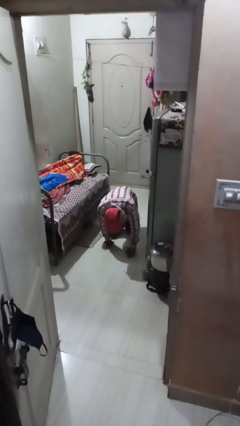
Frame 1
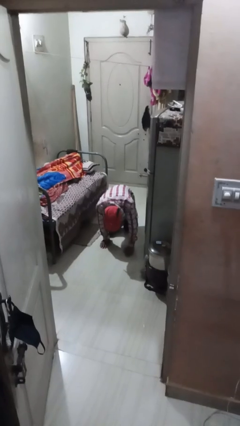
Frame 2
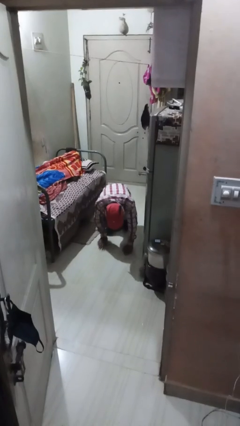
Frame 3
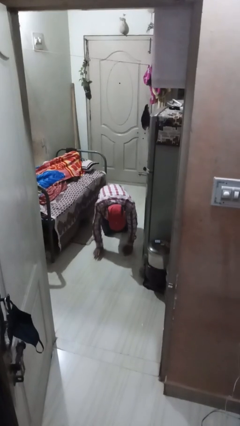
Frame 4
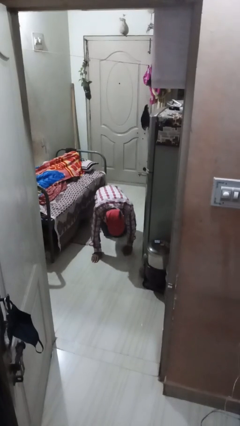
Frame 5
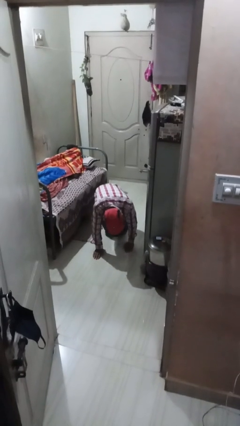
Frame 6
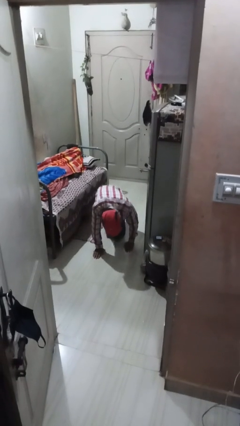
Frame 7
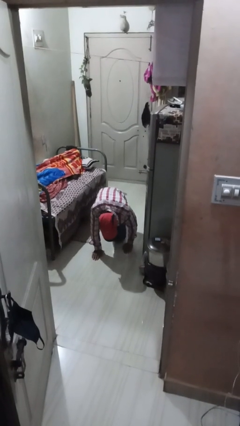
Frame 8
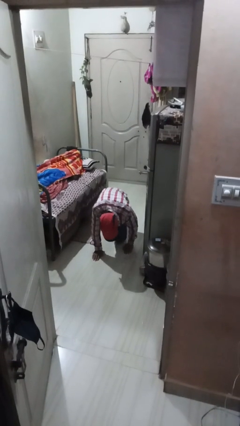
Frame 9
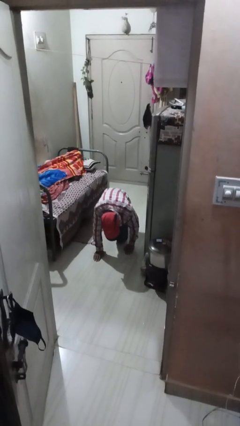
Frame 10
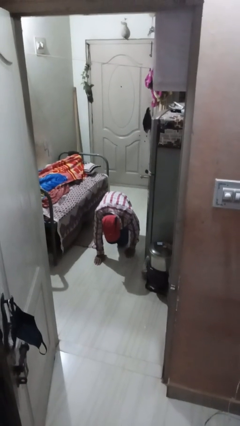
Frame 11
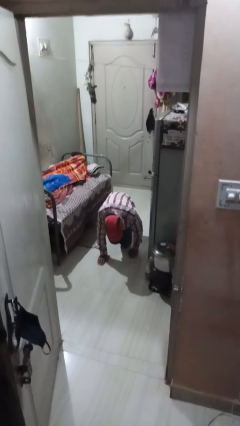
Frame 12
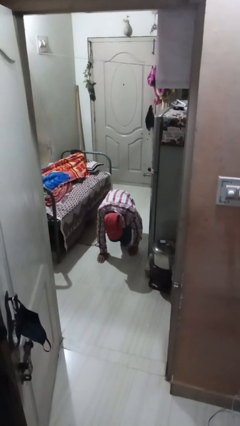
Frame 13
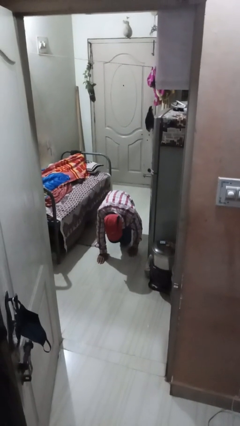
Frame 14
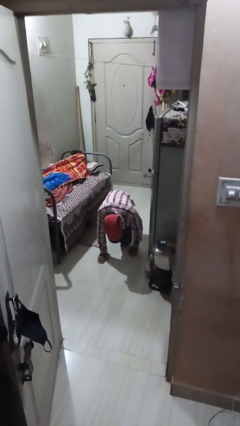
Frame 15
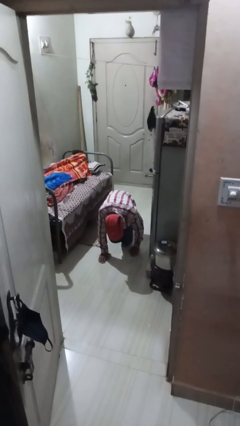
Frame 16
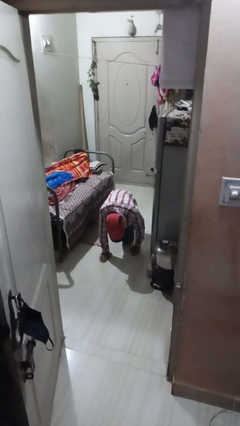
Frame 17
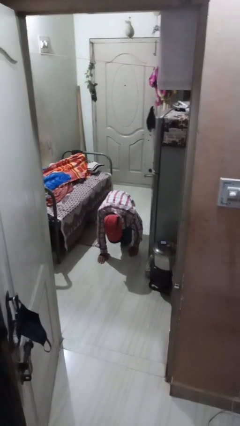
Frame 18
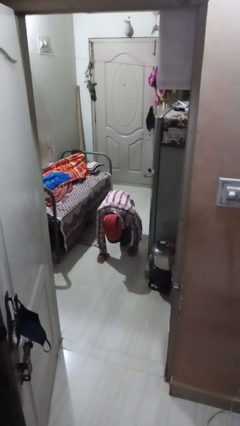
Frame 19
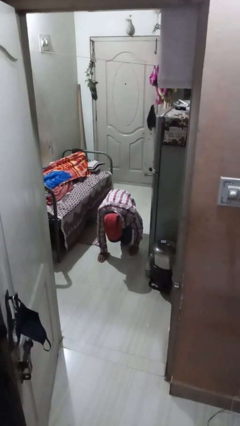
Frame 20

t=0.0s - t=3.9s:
person crawls

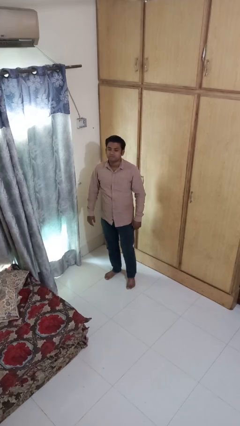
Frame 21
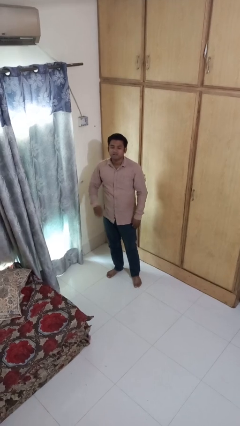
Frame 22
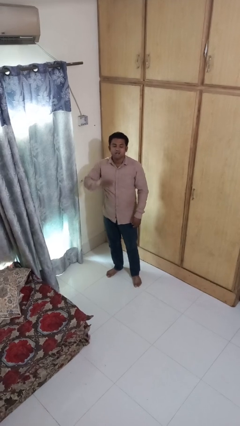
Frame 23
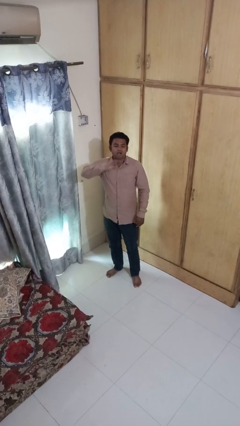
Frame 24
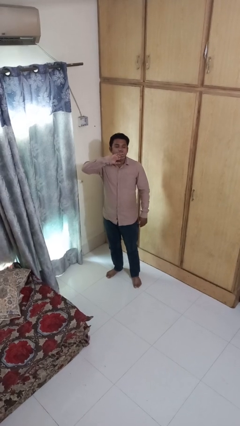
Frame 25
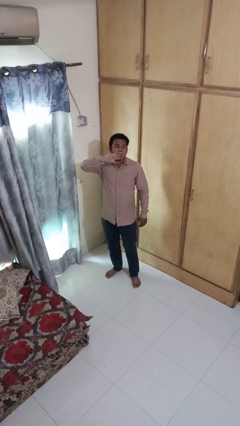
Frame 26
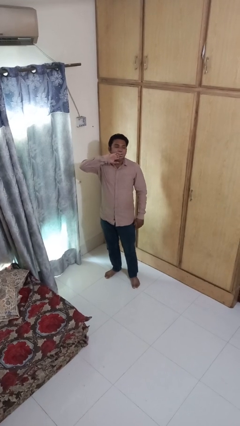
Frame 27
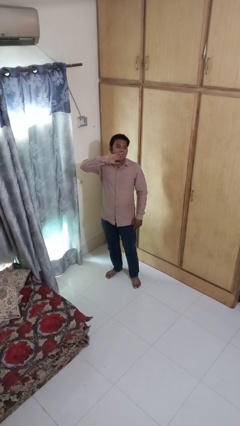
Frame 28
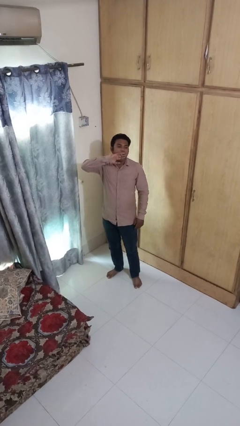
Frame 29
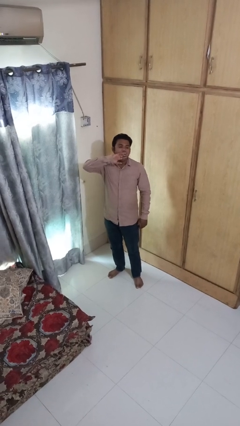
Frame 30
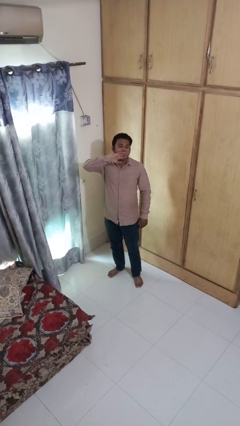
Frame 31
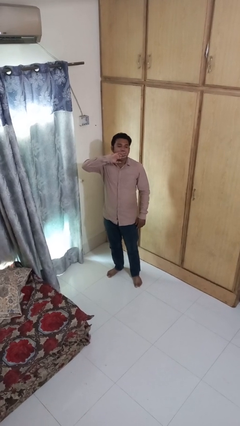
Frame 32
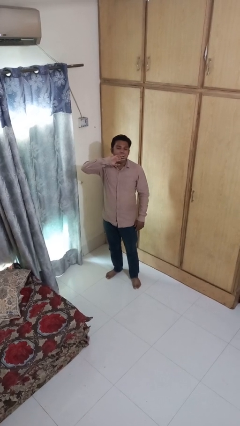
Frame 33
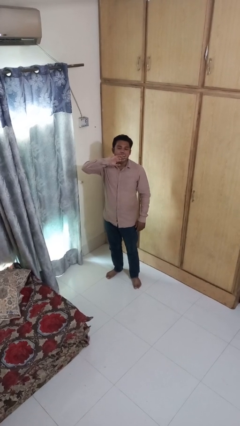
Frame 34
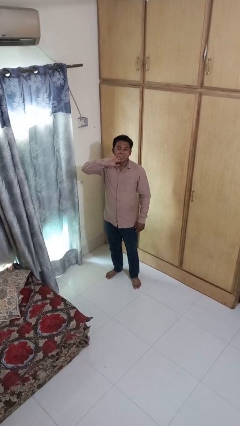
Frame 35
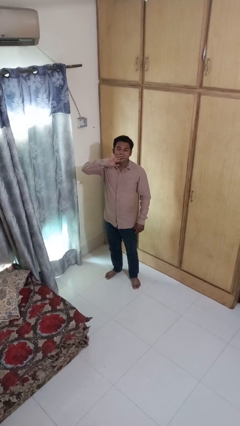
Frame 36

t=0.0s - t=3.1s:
person yawns

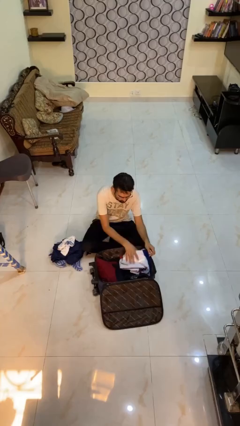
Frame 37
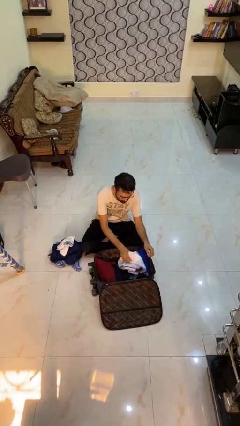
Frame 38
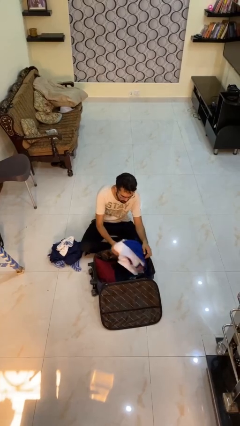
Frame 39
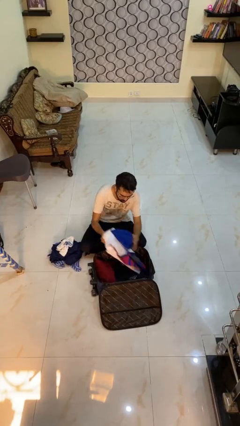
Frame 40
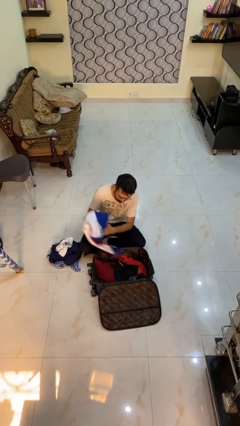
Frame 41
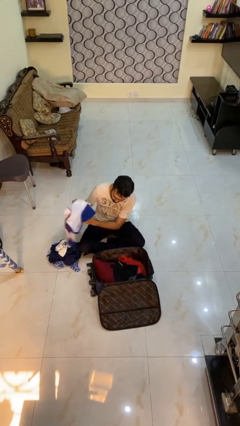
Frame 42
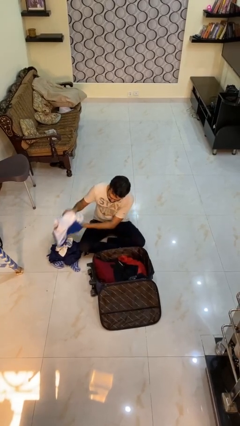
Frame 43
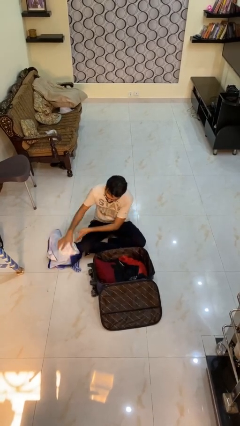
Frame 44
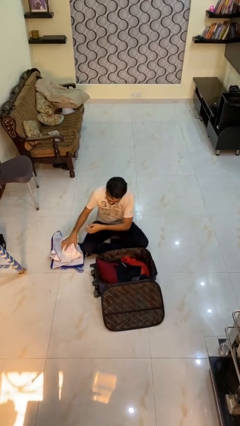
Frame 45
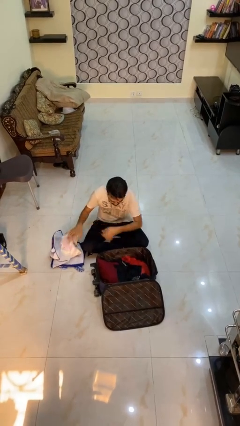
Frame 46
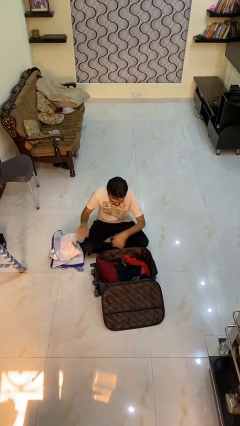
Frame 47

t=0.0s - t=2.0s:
person unloads clothes from suitcase

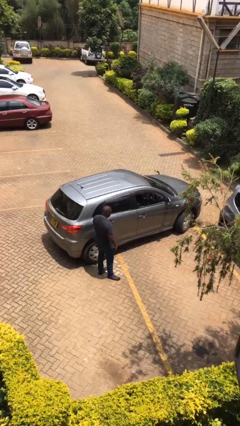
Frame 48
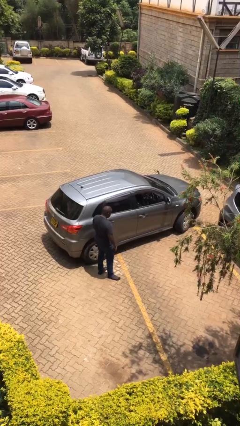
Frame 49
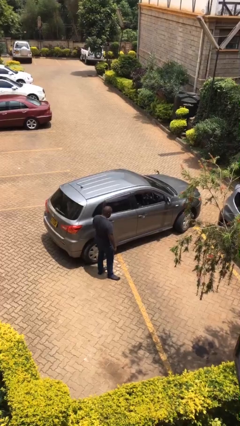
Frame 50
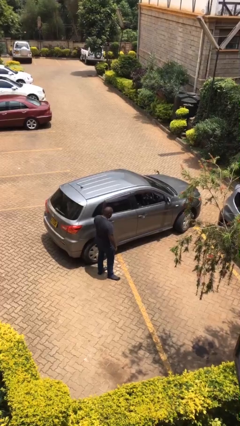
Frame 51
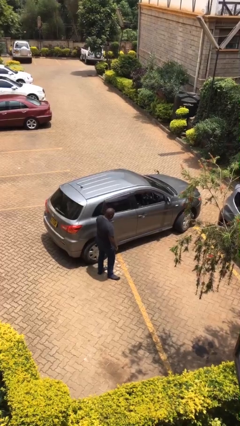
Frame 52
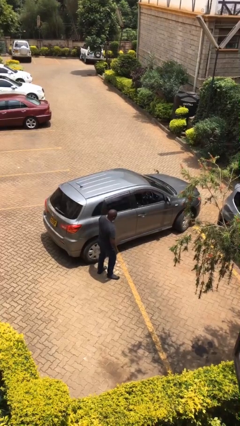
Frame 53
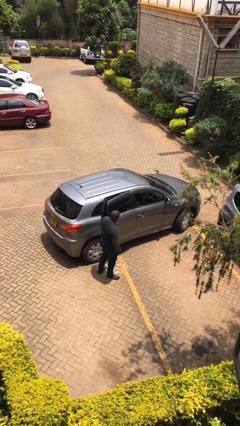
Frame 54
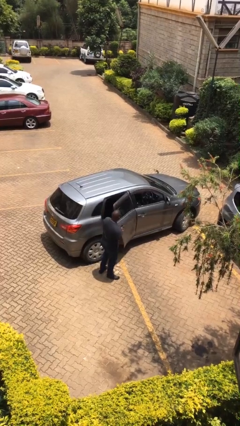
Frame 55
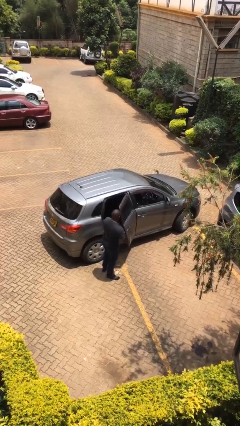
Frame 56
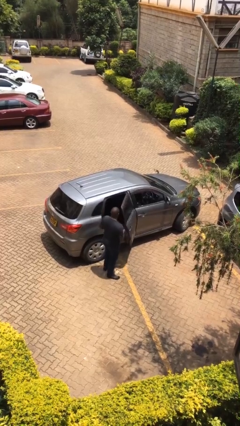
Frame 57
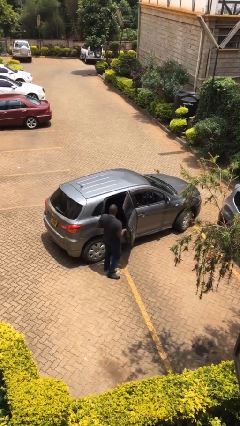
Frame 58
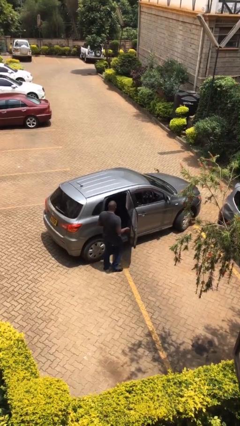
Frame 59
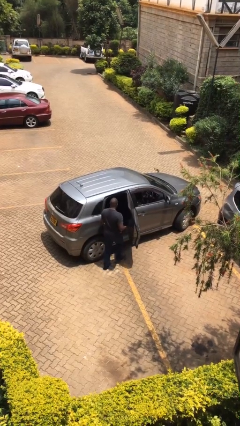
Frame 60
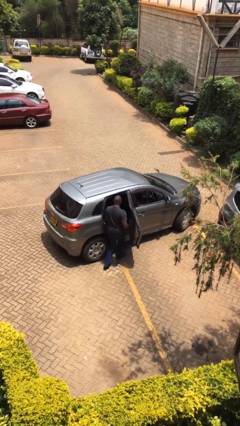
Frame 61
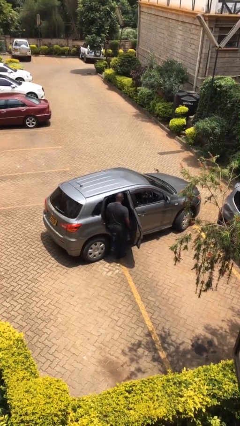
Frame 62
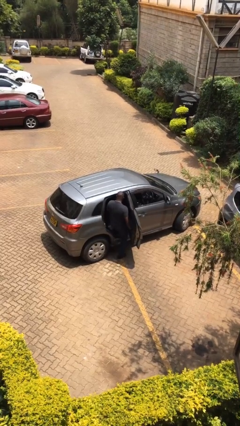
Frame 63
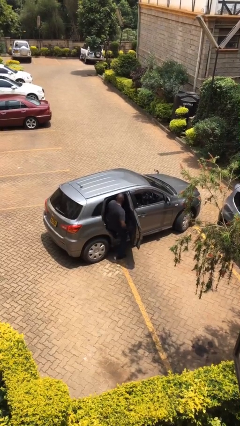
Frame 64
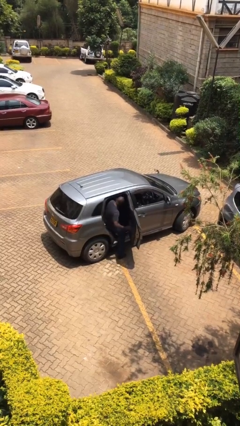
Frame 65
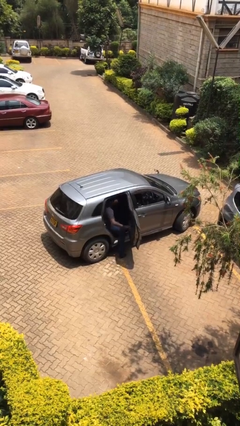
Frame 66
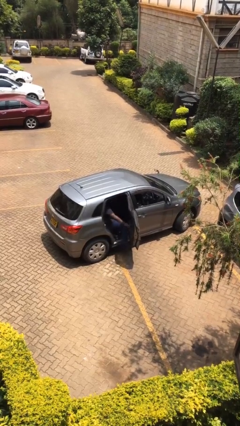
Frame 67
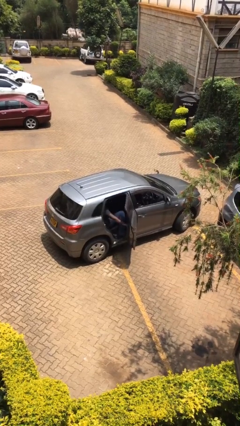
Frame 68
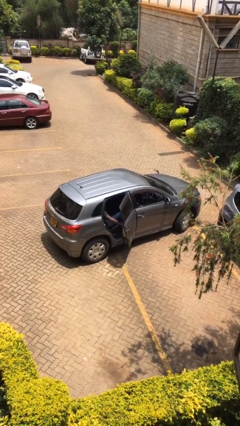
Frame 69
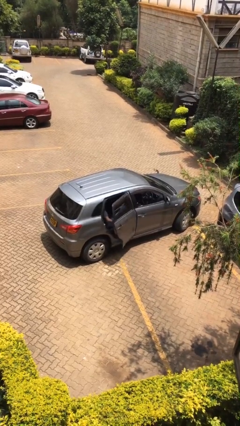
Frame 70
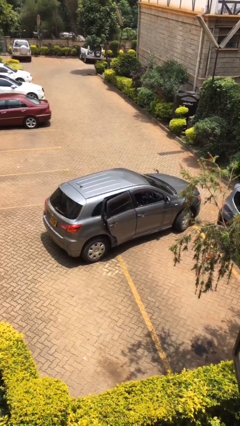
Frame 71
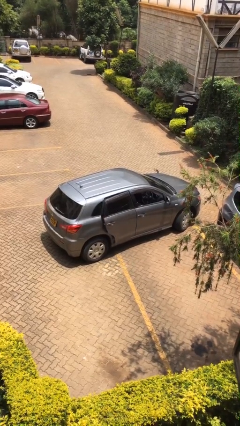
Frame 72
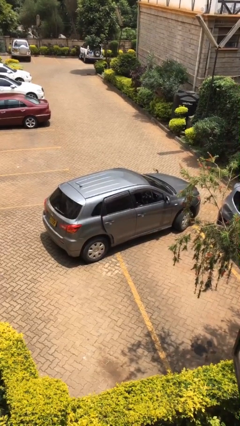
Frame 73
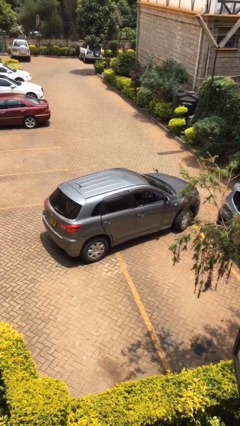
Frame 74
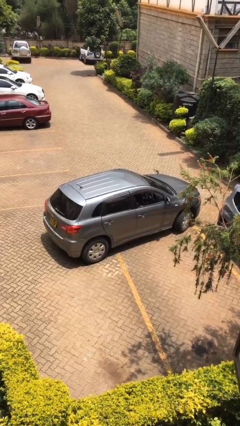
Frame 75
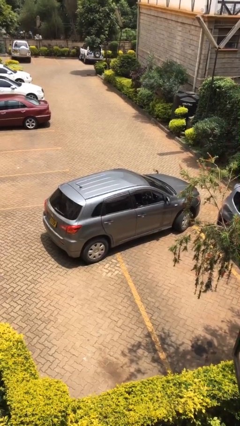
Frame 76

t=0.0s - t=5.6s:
car picks up person

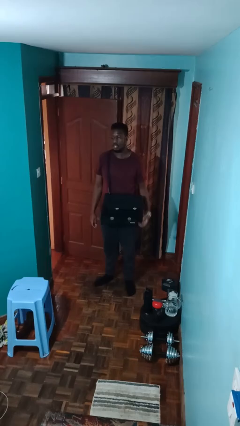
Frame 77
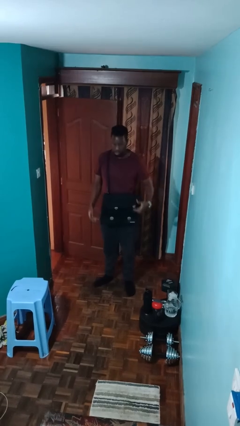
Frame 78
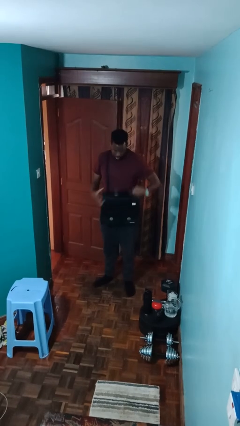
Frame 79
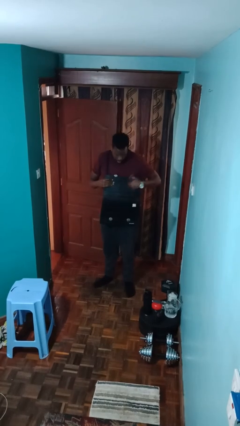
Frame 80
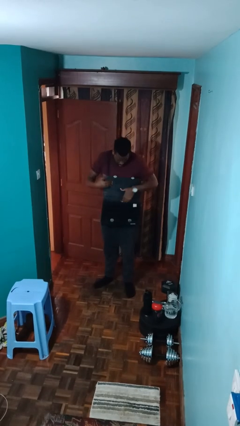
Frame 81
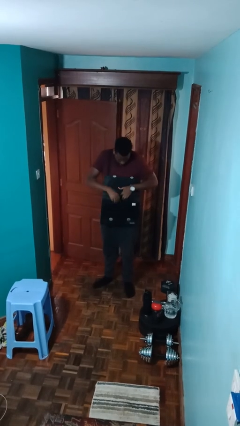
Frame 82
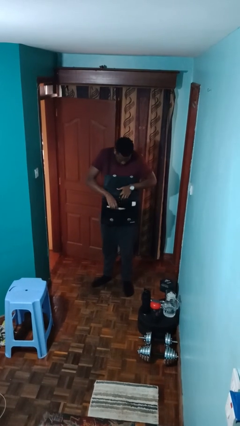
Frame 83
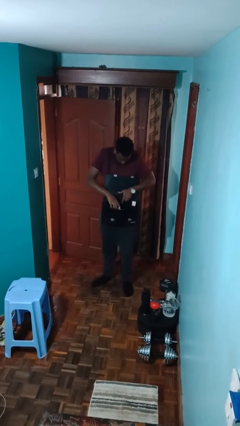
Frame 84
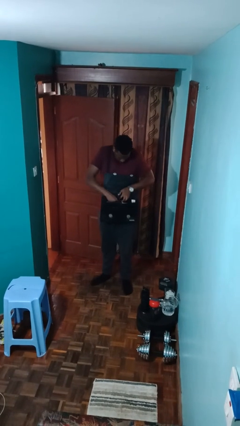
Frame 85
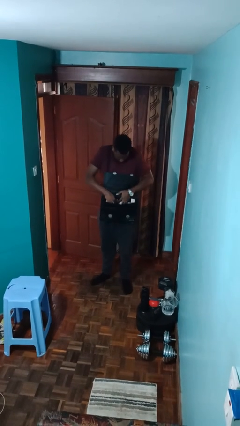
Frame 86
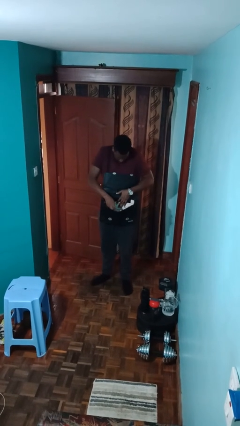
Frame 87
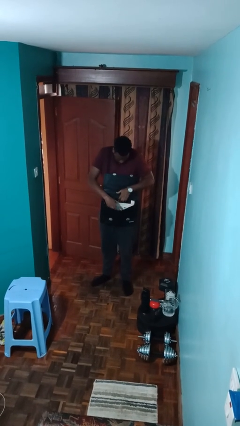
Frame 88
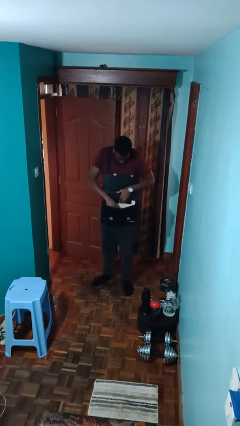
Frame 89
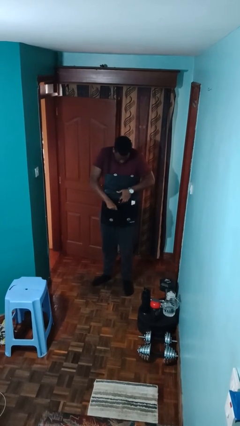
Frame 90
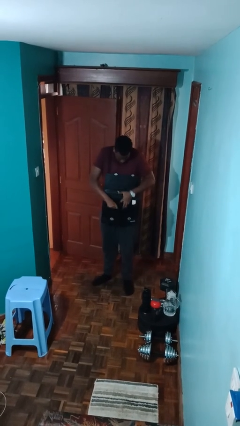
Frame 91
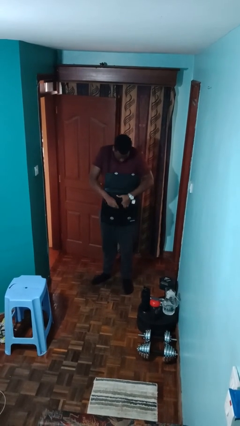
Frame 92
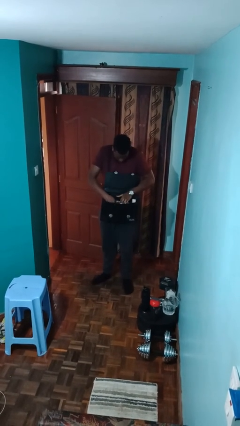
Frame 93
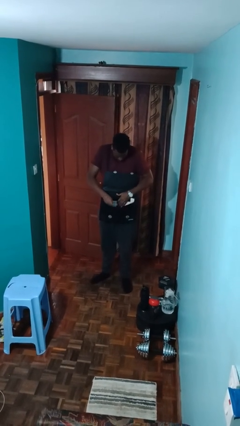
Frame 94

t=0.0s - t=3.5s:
person searches in purse
